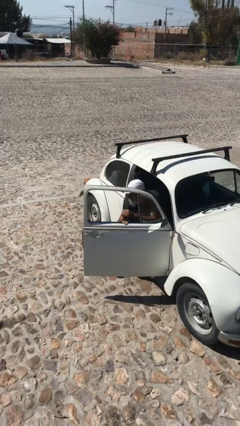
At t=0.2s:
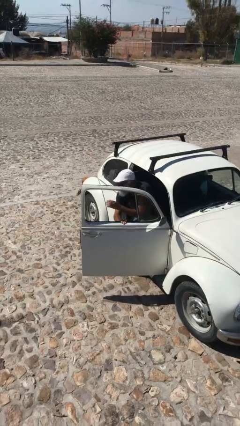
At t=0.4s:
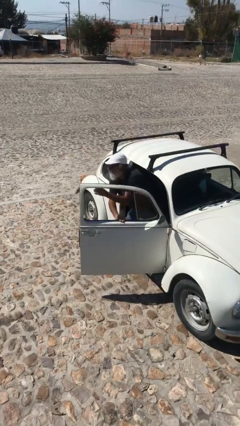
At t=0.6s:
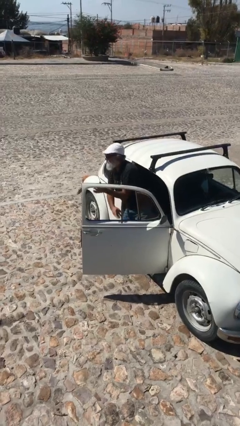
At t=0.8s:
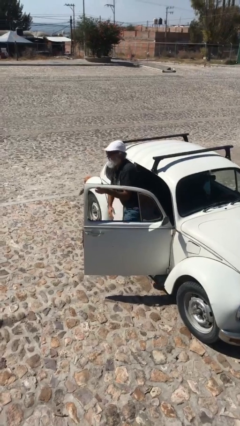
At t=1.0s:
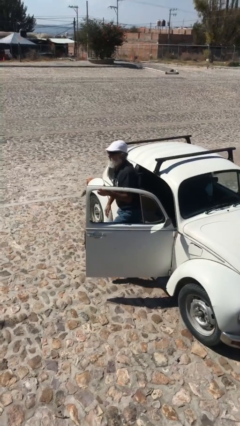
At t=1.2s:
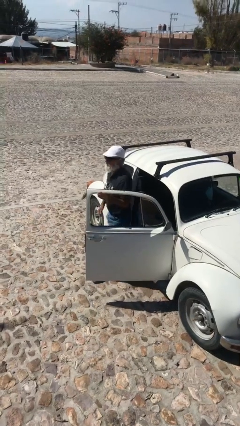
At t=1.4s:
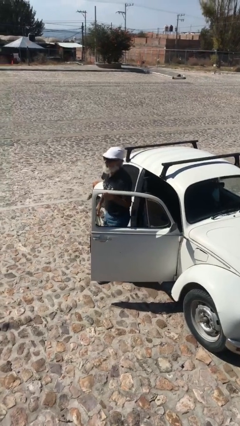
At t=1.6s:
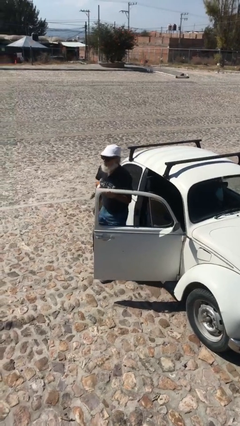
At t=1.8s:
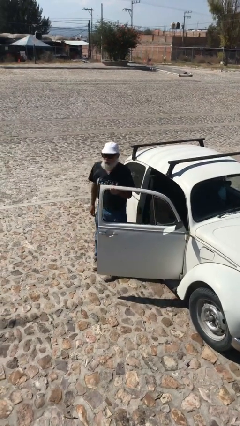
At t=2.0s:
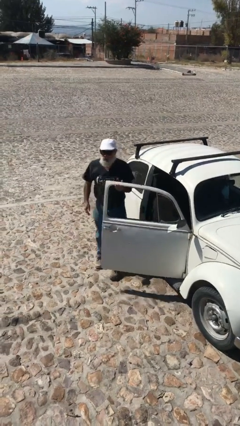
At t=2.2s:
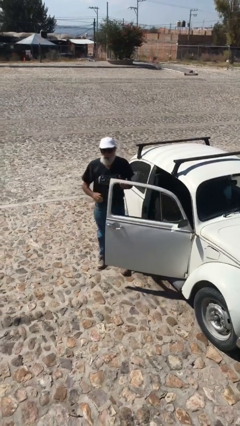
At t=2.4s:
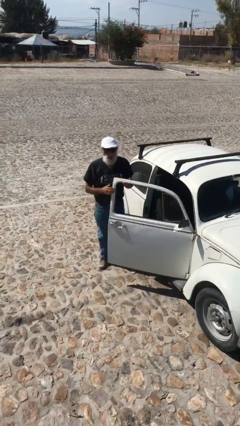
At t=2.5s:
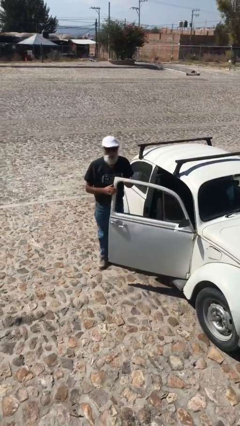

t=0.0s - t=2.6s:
person exits car

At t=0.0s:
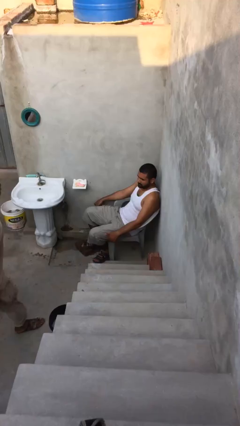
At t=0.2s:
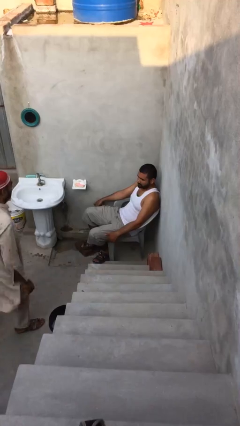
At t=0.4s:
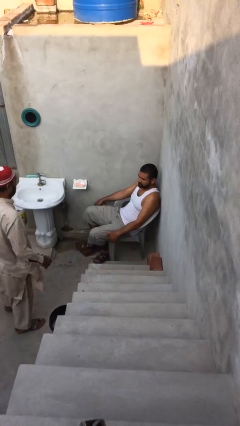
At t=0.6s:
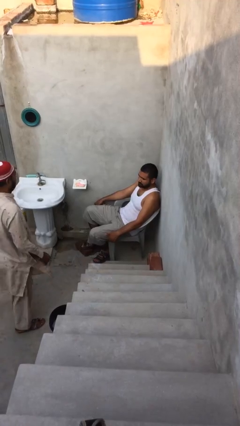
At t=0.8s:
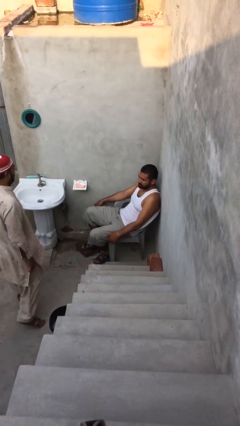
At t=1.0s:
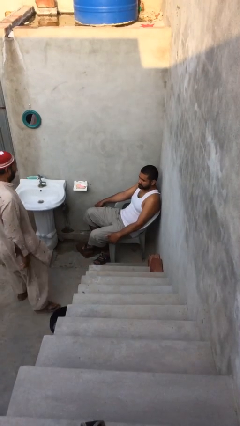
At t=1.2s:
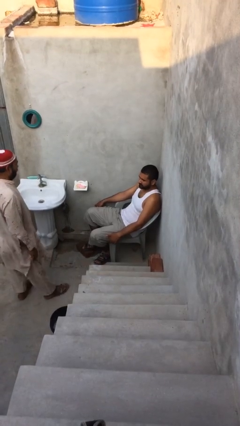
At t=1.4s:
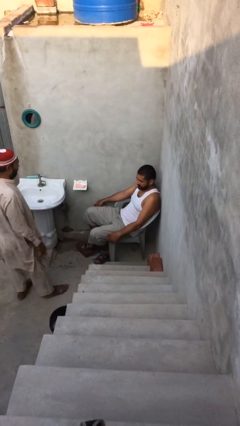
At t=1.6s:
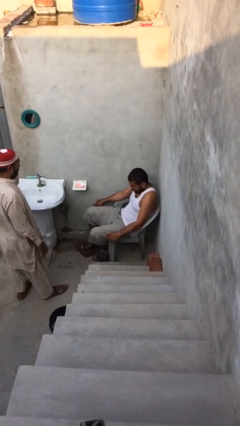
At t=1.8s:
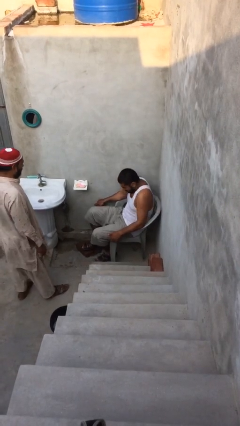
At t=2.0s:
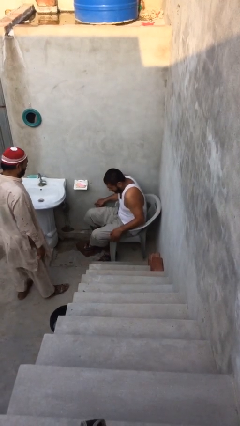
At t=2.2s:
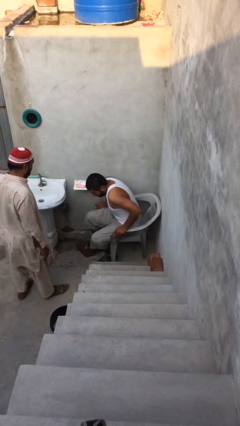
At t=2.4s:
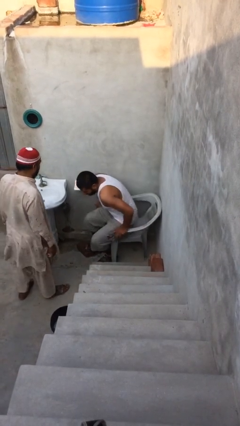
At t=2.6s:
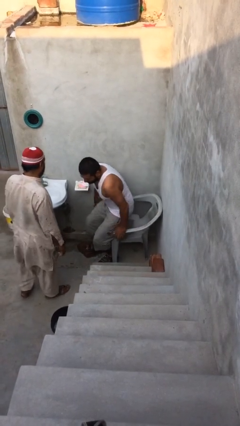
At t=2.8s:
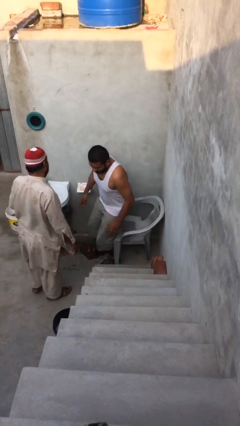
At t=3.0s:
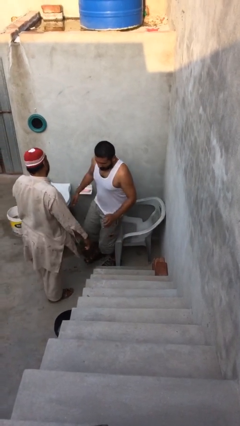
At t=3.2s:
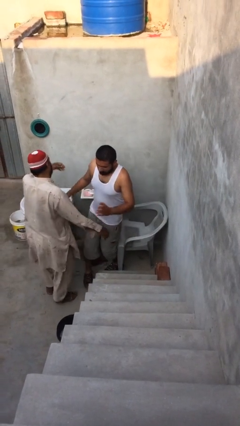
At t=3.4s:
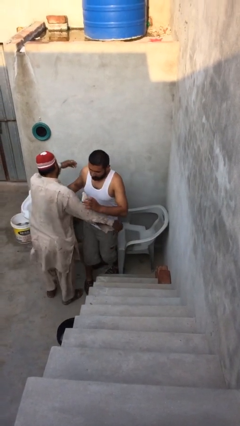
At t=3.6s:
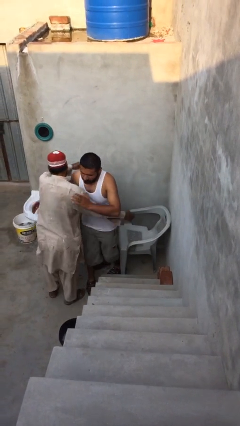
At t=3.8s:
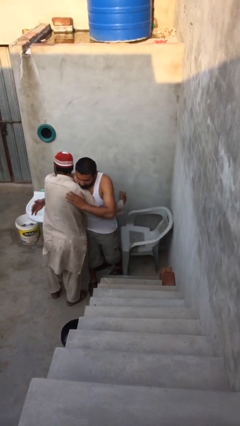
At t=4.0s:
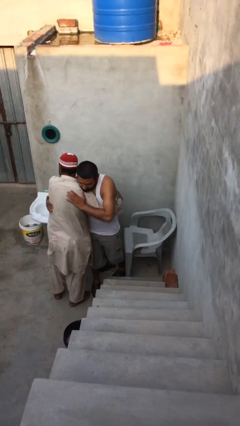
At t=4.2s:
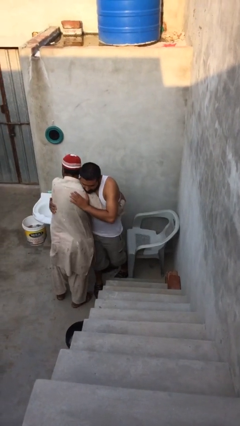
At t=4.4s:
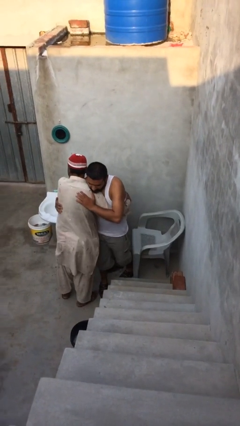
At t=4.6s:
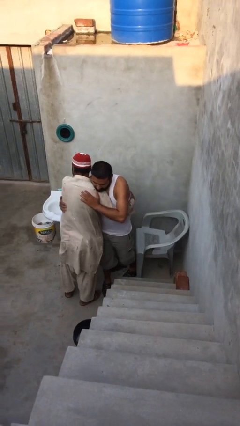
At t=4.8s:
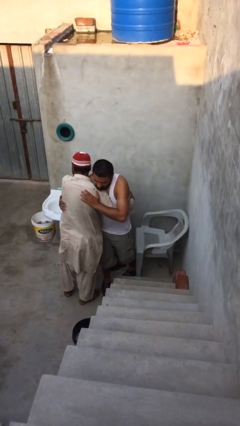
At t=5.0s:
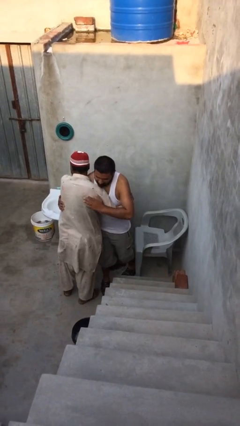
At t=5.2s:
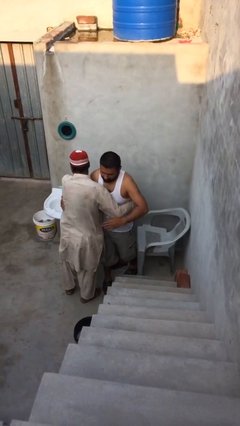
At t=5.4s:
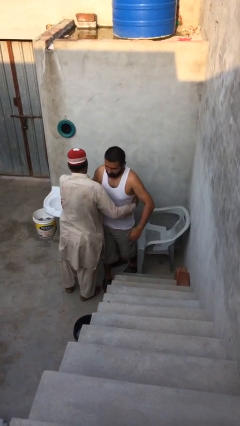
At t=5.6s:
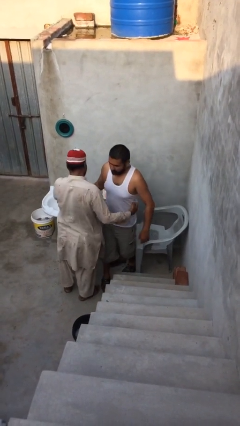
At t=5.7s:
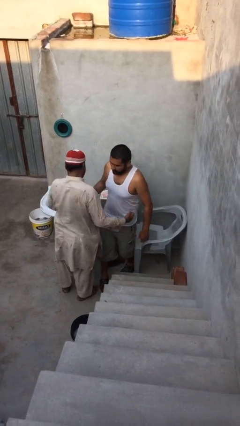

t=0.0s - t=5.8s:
person embraces person

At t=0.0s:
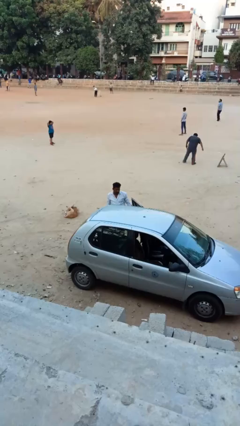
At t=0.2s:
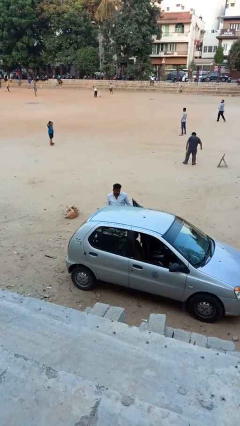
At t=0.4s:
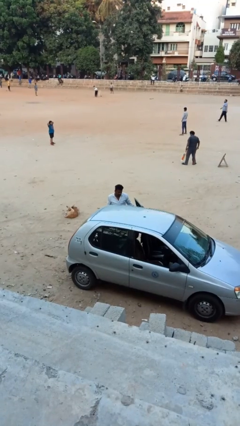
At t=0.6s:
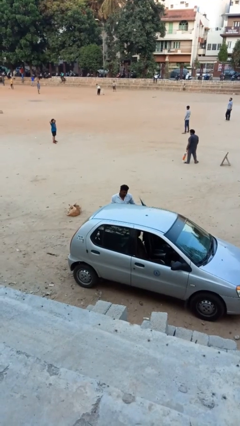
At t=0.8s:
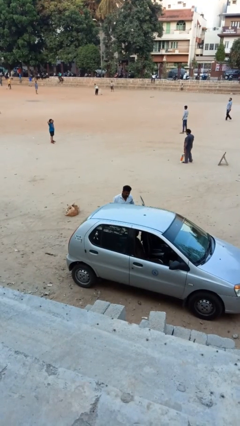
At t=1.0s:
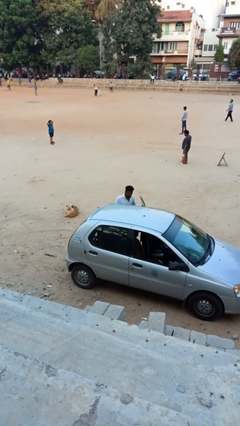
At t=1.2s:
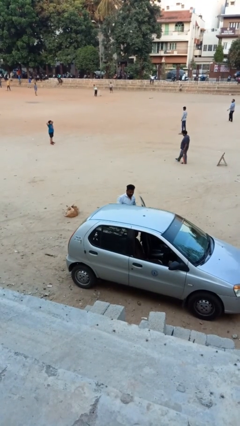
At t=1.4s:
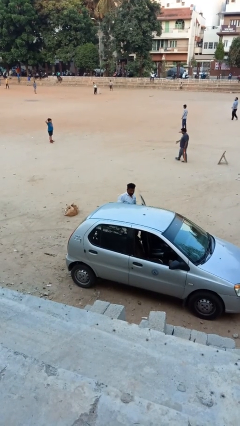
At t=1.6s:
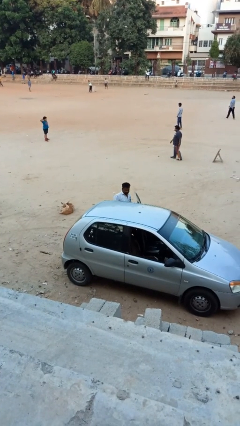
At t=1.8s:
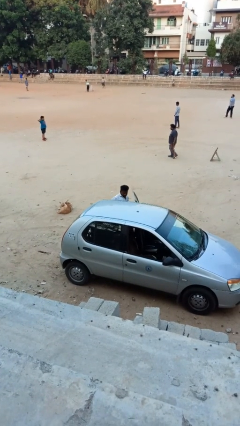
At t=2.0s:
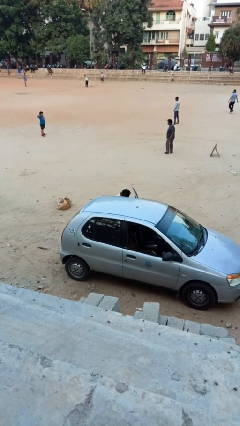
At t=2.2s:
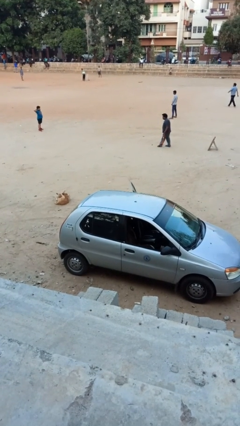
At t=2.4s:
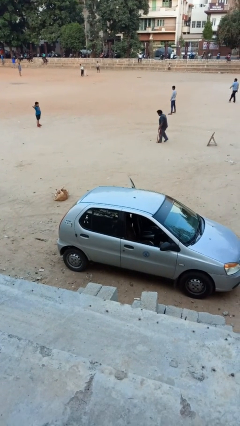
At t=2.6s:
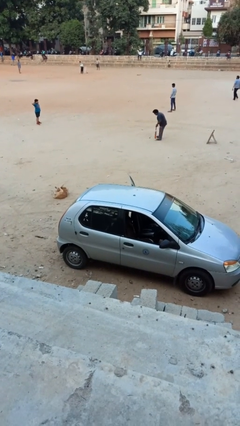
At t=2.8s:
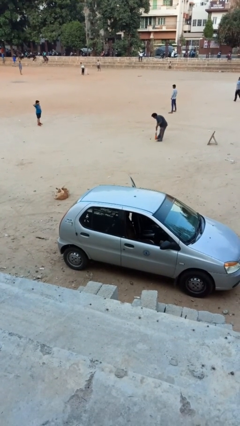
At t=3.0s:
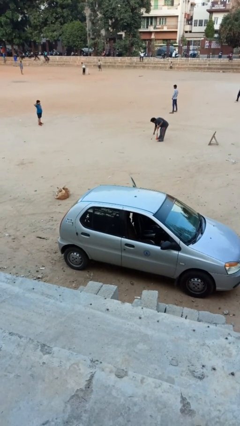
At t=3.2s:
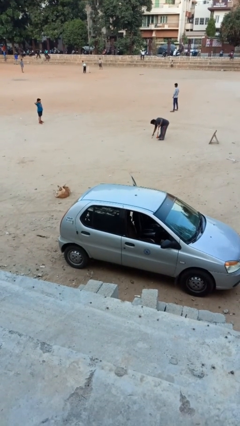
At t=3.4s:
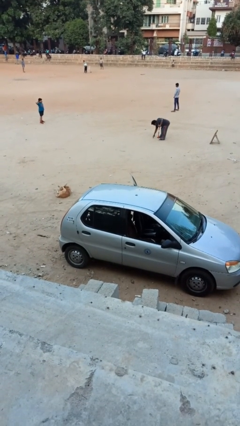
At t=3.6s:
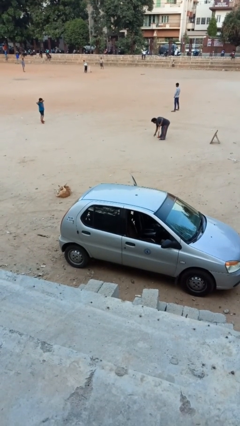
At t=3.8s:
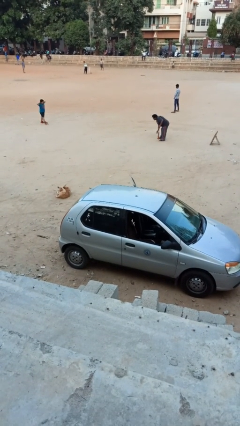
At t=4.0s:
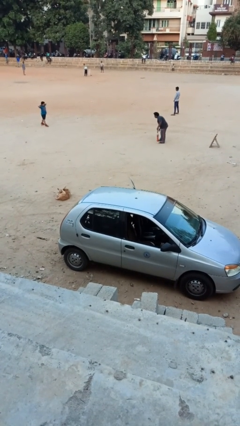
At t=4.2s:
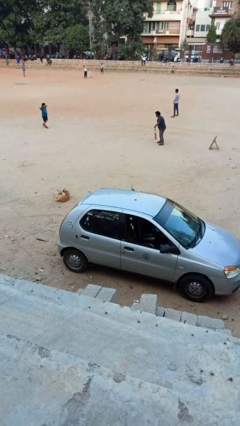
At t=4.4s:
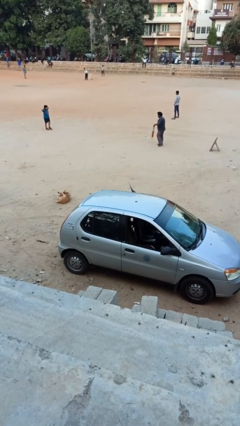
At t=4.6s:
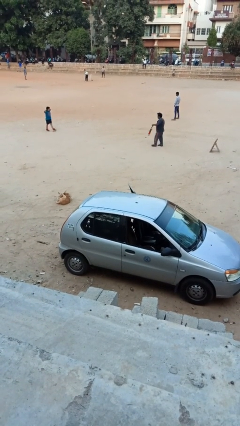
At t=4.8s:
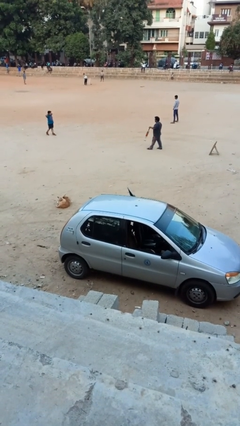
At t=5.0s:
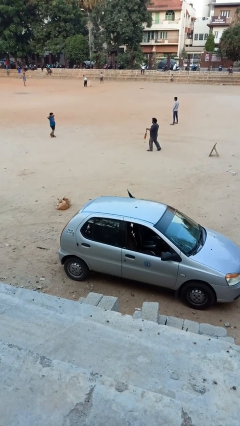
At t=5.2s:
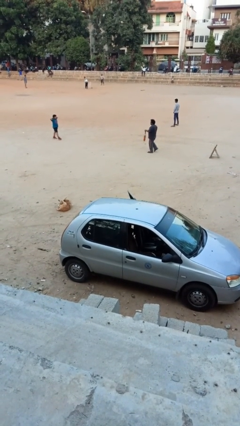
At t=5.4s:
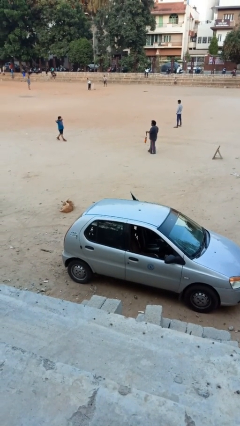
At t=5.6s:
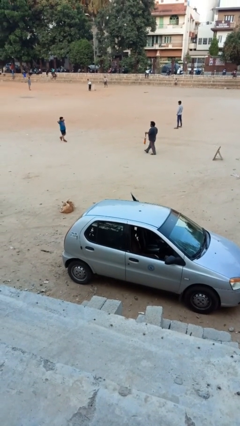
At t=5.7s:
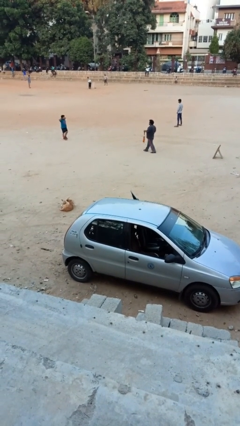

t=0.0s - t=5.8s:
person enters car

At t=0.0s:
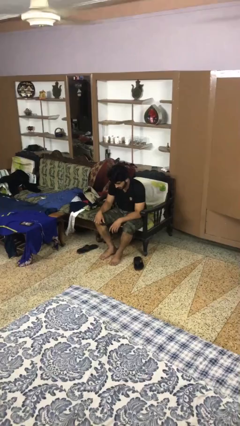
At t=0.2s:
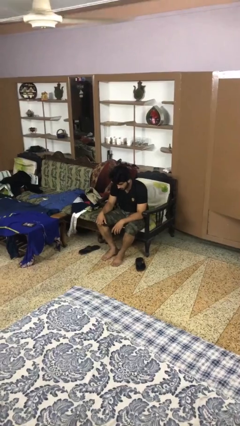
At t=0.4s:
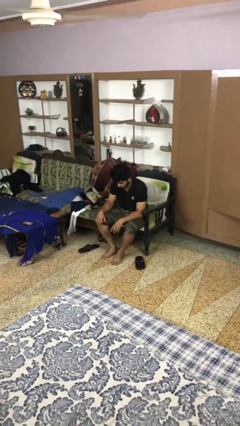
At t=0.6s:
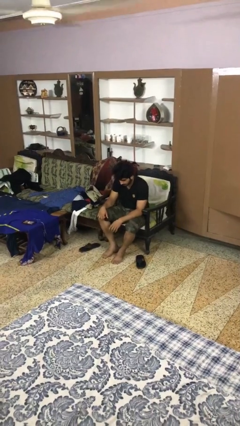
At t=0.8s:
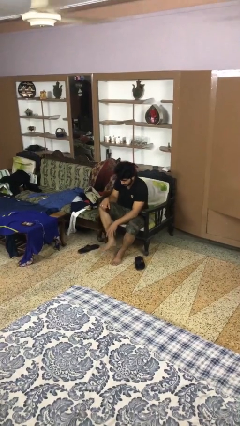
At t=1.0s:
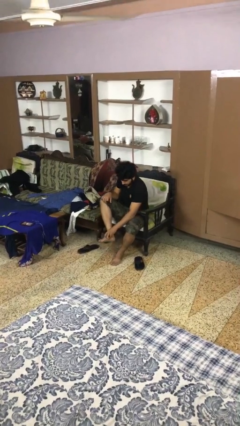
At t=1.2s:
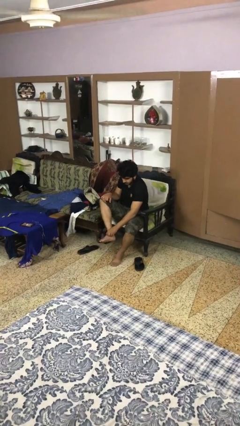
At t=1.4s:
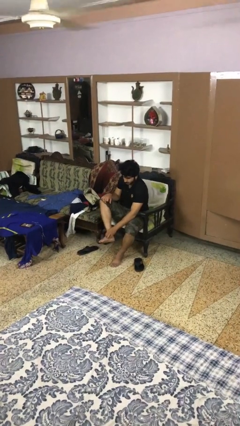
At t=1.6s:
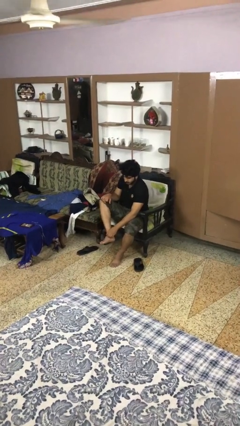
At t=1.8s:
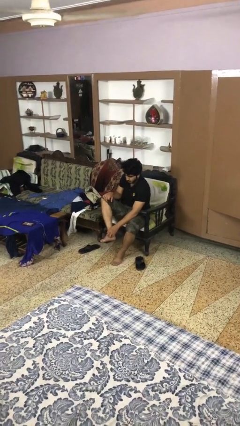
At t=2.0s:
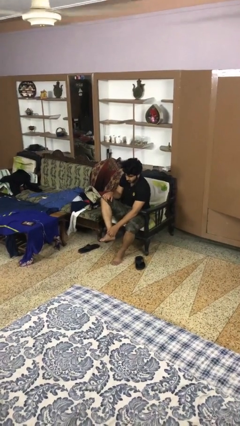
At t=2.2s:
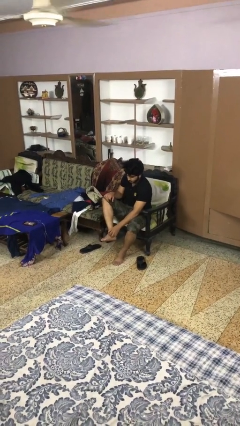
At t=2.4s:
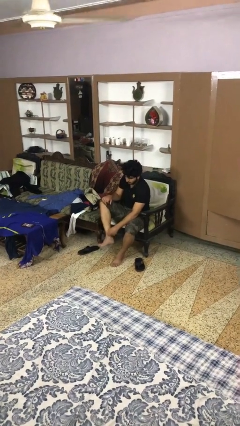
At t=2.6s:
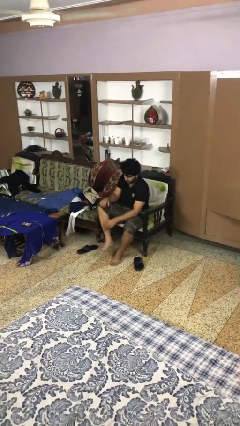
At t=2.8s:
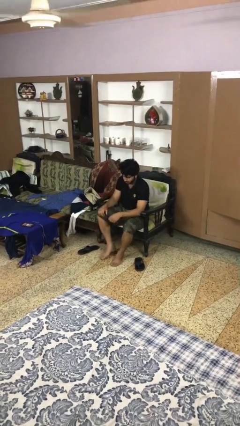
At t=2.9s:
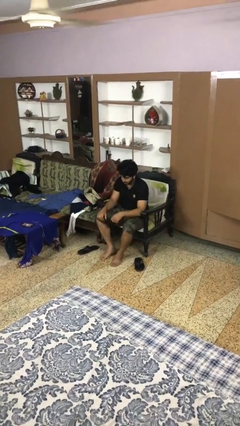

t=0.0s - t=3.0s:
person rubs foot

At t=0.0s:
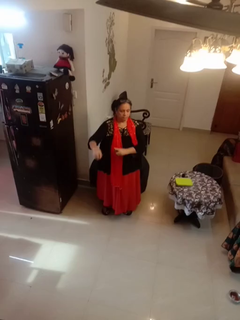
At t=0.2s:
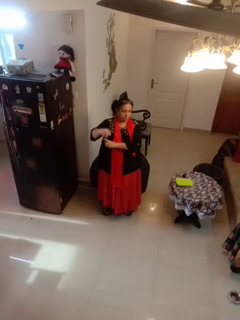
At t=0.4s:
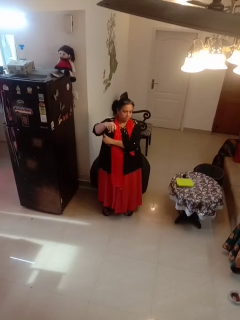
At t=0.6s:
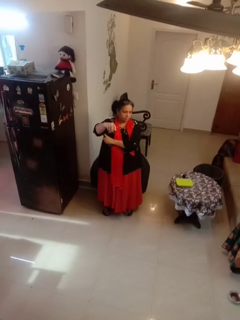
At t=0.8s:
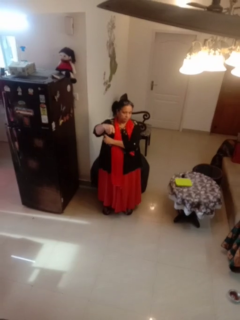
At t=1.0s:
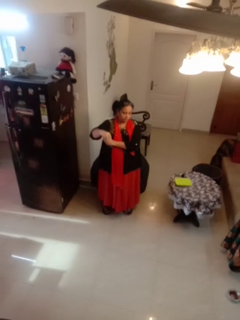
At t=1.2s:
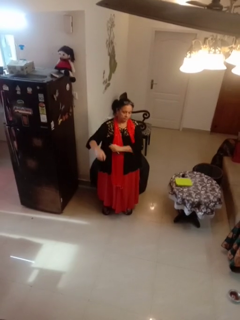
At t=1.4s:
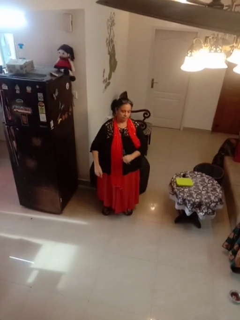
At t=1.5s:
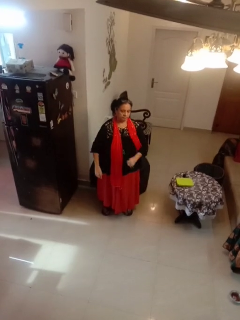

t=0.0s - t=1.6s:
person applies deodorant
